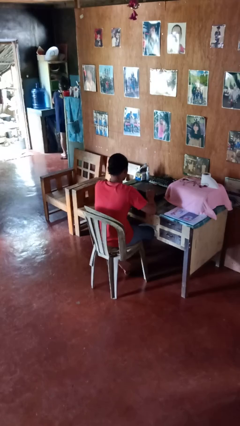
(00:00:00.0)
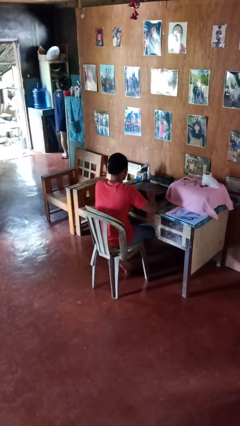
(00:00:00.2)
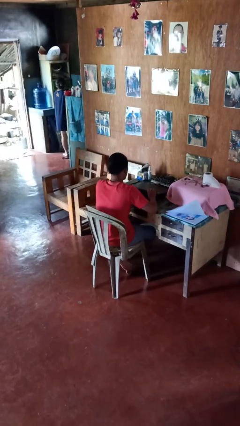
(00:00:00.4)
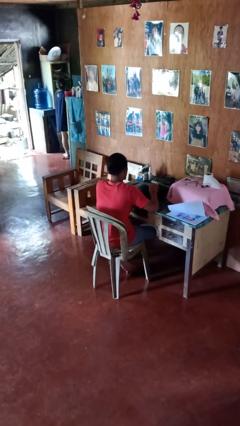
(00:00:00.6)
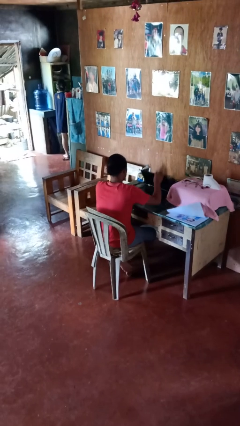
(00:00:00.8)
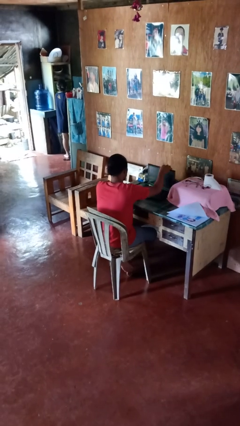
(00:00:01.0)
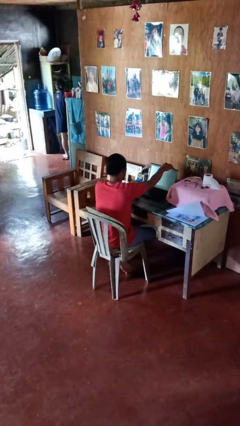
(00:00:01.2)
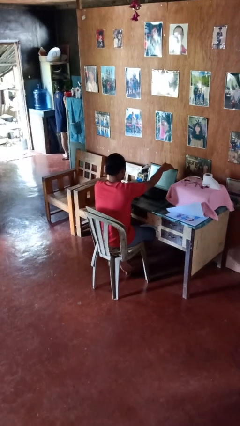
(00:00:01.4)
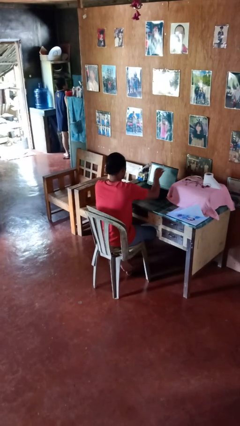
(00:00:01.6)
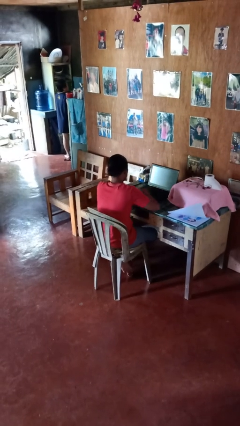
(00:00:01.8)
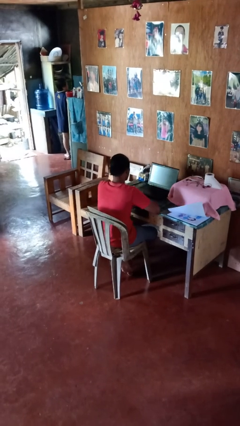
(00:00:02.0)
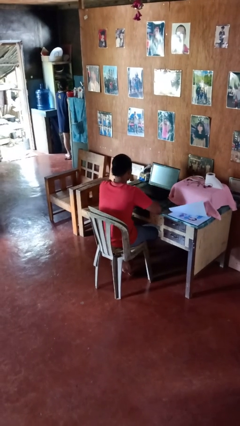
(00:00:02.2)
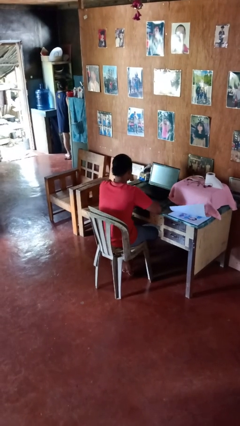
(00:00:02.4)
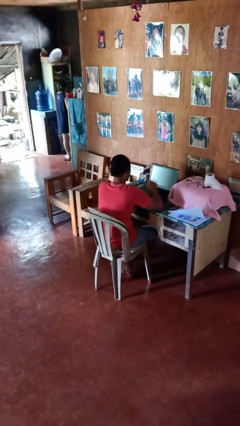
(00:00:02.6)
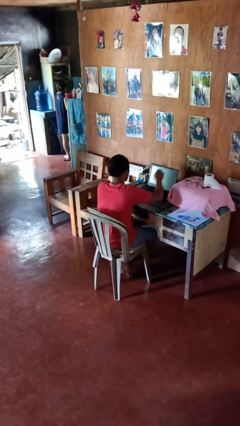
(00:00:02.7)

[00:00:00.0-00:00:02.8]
person opens laptop

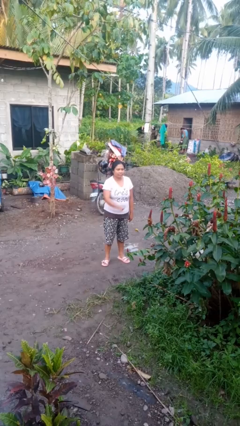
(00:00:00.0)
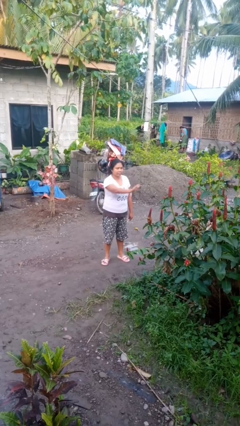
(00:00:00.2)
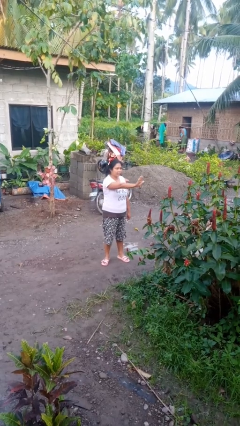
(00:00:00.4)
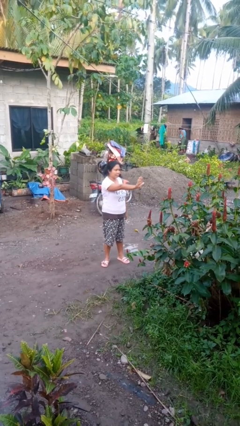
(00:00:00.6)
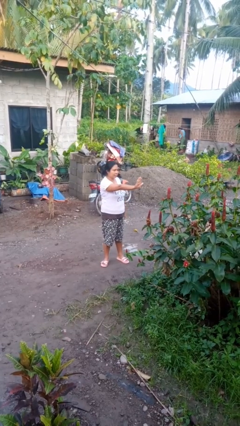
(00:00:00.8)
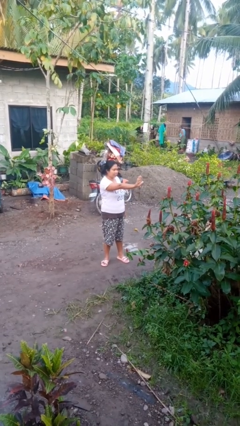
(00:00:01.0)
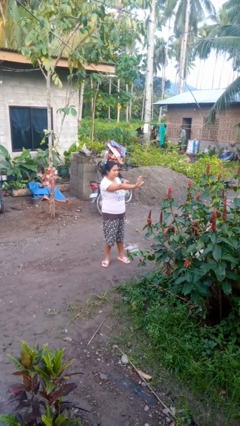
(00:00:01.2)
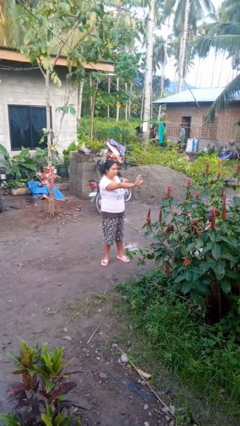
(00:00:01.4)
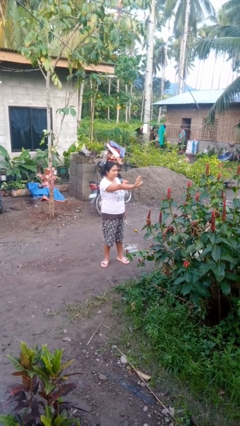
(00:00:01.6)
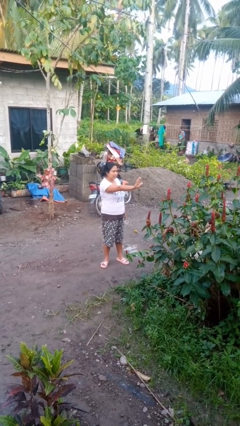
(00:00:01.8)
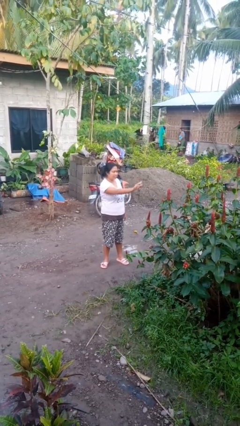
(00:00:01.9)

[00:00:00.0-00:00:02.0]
person gestures stop

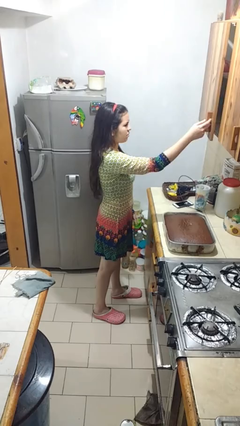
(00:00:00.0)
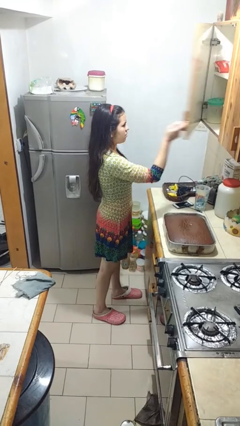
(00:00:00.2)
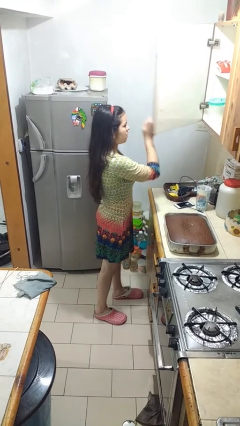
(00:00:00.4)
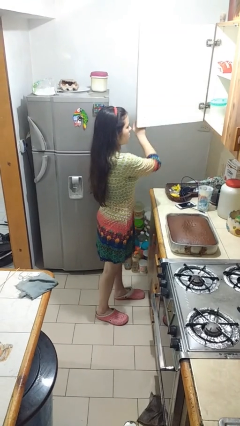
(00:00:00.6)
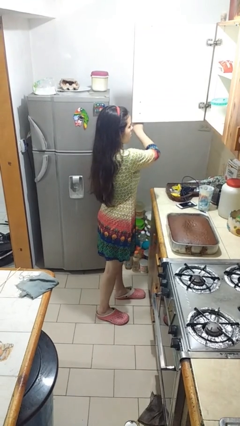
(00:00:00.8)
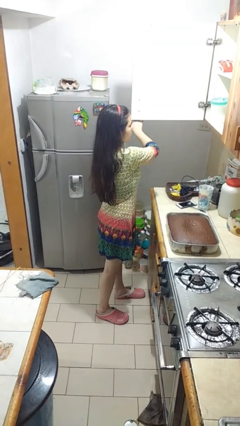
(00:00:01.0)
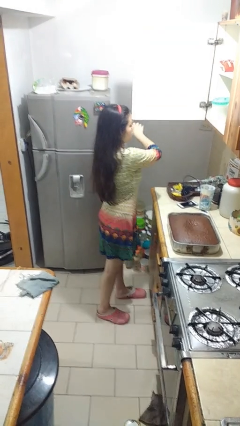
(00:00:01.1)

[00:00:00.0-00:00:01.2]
person opens cabinet

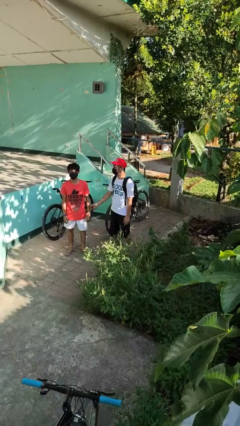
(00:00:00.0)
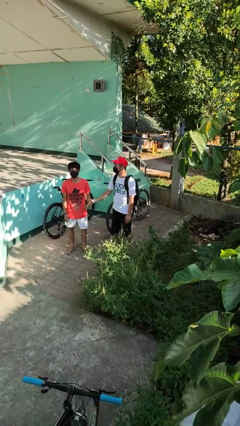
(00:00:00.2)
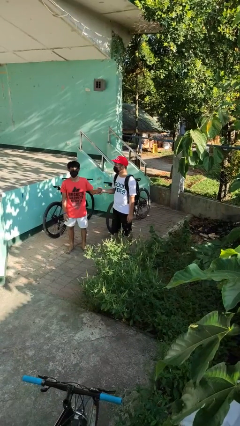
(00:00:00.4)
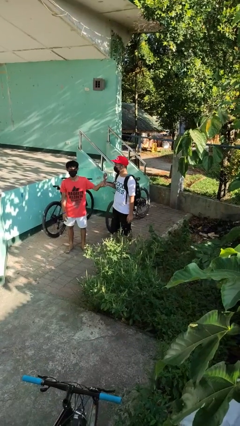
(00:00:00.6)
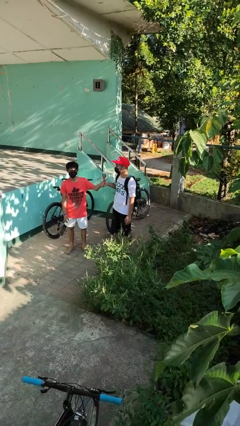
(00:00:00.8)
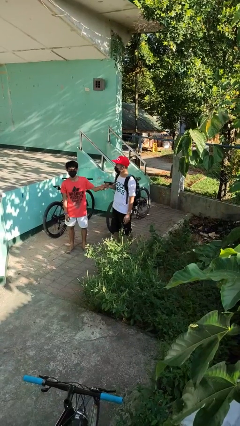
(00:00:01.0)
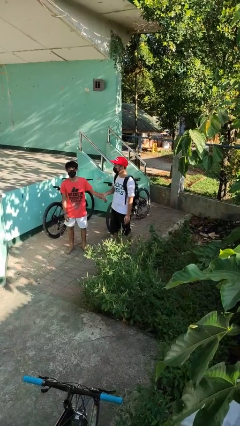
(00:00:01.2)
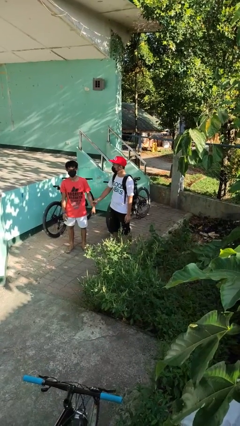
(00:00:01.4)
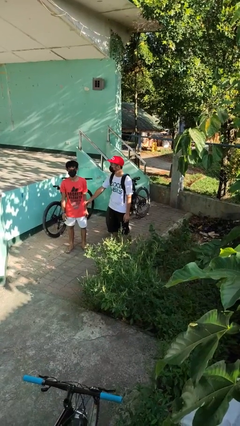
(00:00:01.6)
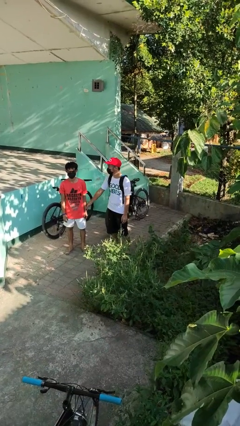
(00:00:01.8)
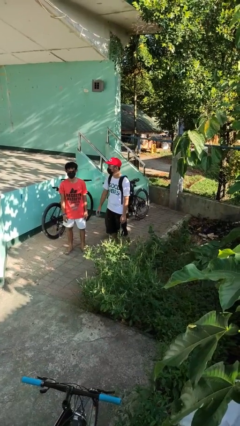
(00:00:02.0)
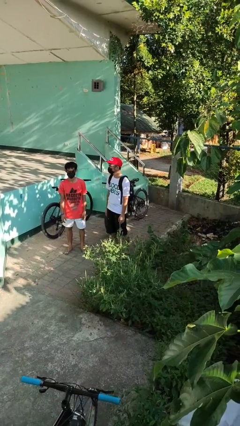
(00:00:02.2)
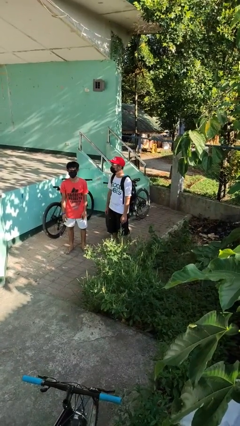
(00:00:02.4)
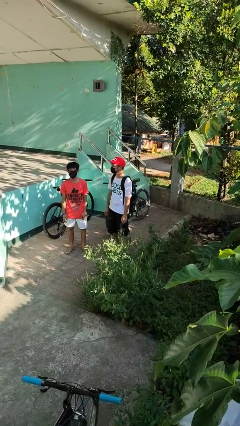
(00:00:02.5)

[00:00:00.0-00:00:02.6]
person grabs person by forearm

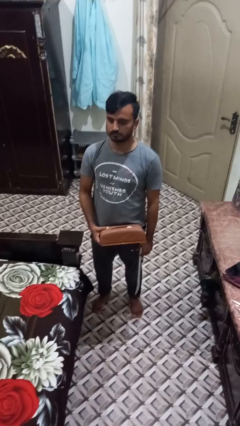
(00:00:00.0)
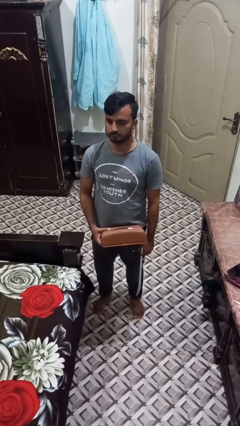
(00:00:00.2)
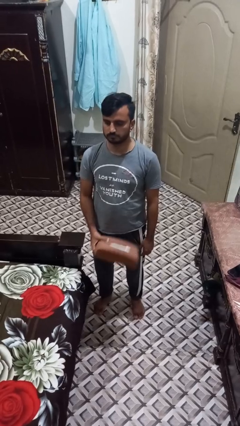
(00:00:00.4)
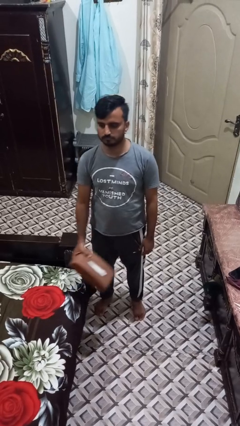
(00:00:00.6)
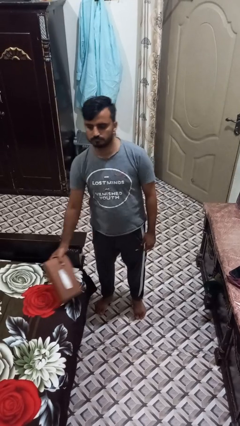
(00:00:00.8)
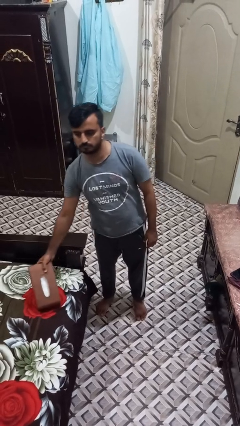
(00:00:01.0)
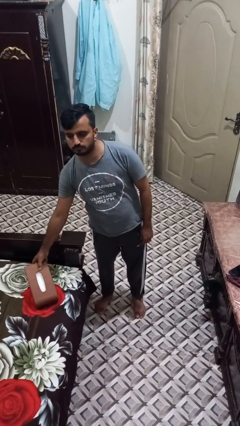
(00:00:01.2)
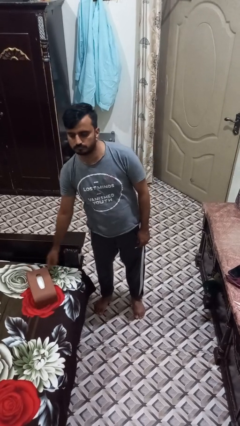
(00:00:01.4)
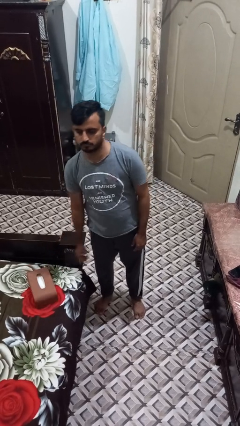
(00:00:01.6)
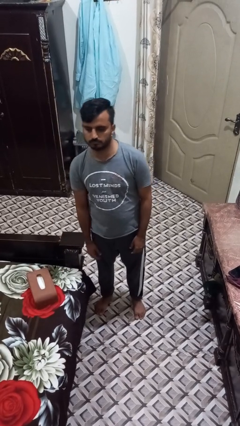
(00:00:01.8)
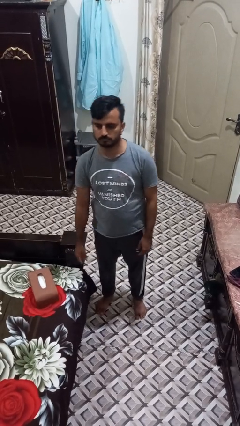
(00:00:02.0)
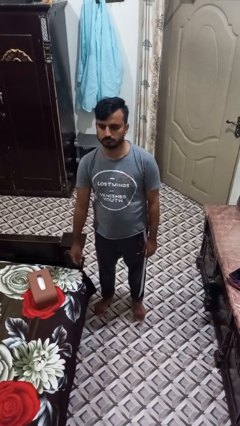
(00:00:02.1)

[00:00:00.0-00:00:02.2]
person puts down object on bed

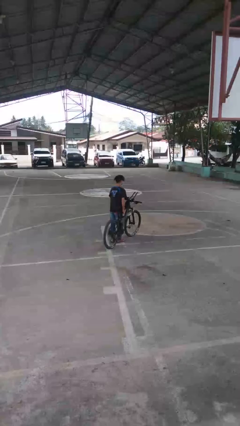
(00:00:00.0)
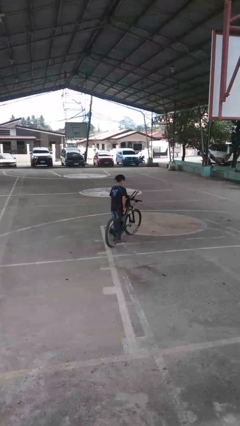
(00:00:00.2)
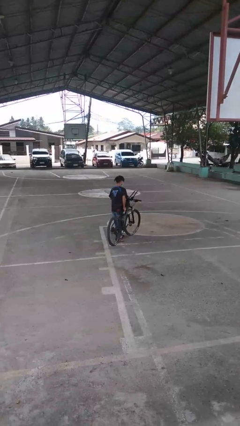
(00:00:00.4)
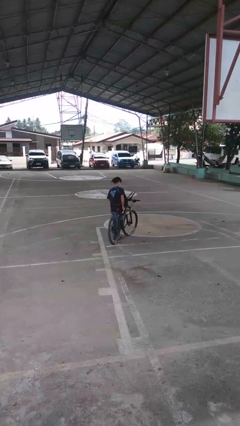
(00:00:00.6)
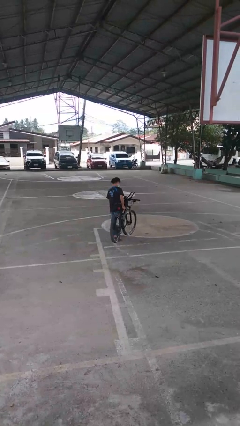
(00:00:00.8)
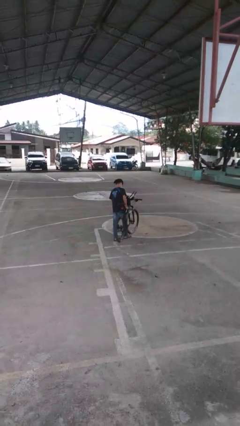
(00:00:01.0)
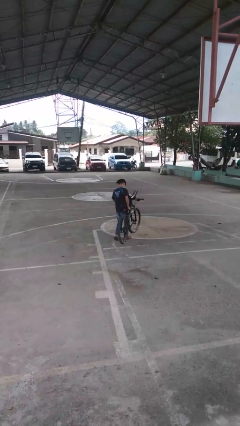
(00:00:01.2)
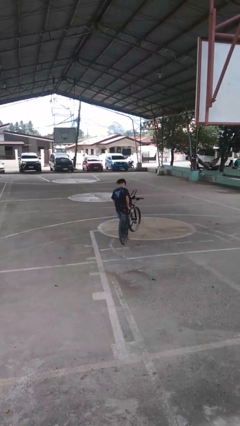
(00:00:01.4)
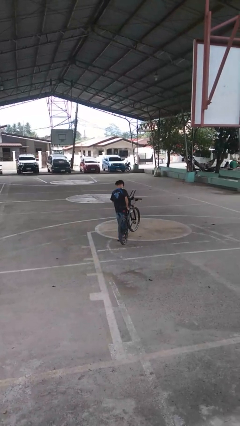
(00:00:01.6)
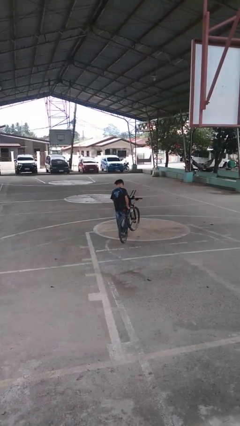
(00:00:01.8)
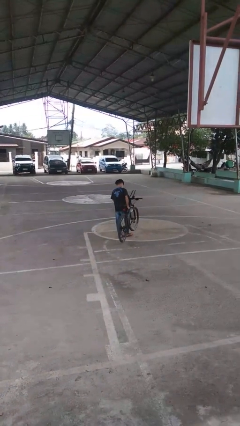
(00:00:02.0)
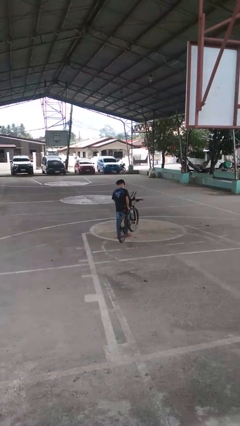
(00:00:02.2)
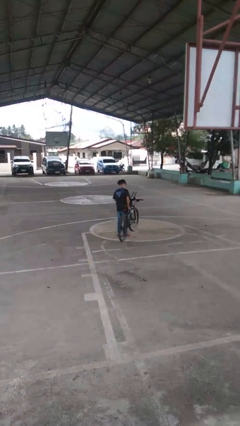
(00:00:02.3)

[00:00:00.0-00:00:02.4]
person carries bicycle

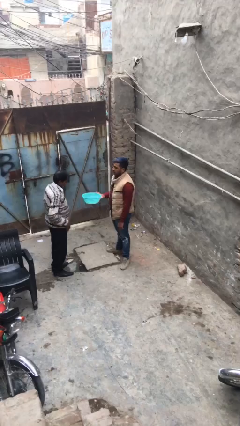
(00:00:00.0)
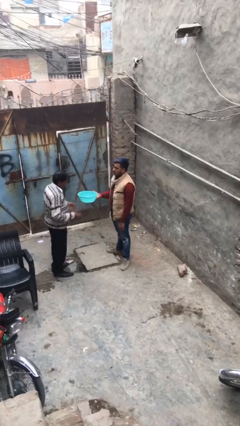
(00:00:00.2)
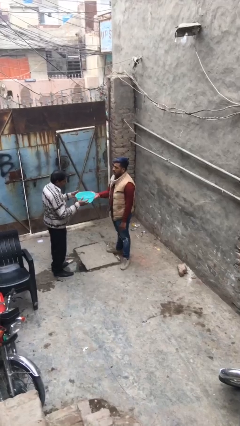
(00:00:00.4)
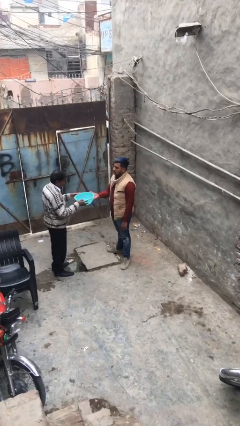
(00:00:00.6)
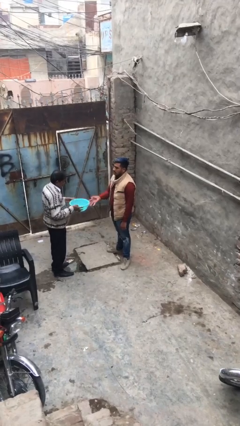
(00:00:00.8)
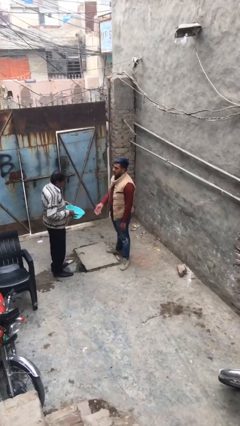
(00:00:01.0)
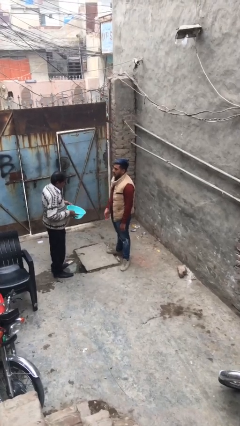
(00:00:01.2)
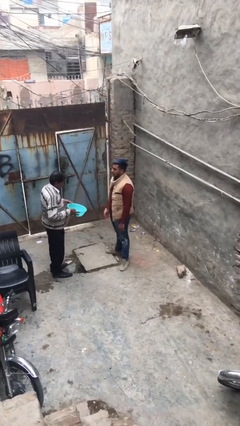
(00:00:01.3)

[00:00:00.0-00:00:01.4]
person transfers object to person

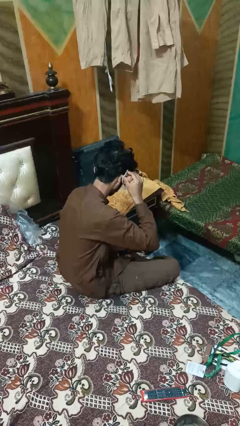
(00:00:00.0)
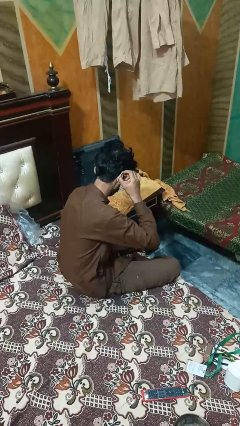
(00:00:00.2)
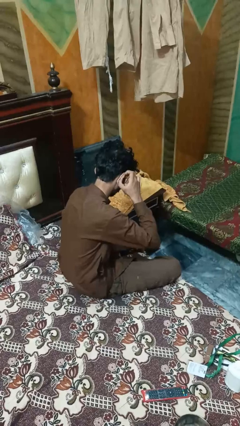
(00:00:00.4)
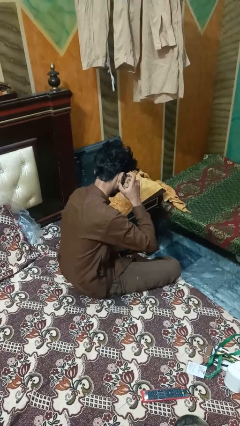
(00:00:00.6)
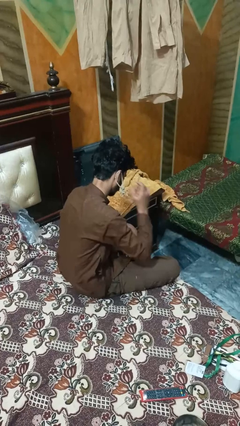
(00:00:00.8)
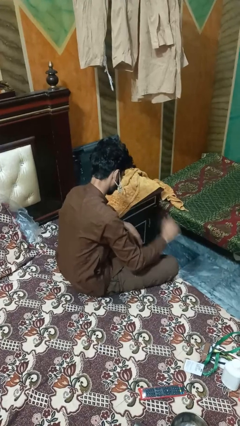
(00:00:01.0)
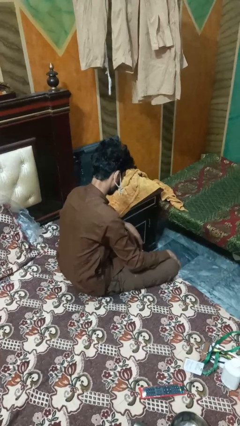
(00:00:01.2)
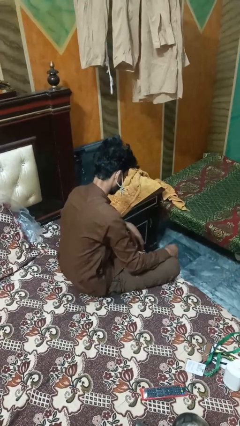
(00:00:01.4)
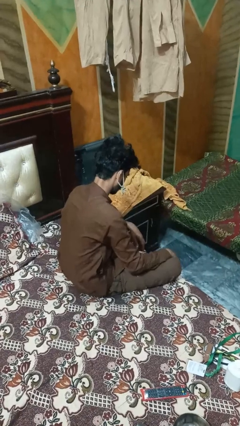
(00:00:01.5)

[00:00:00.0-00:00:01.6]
person puts on earrings

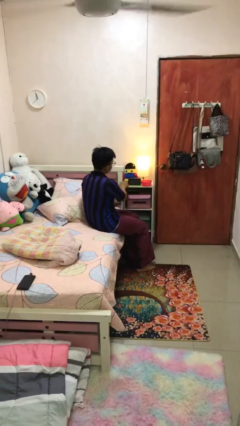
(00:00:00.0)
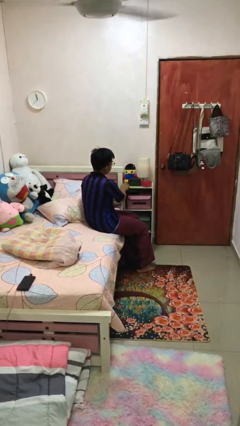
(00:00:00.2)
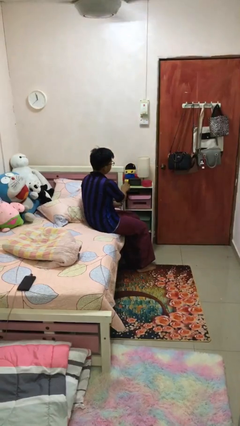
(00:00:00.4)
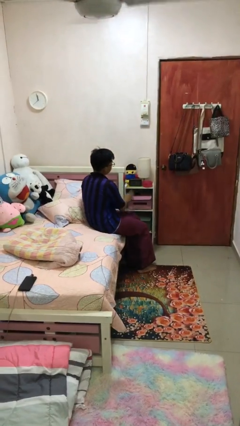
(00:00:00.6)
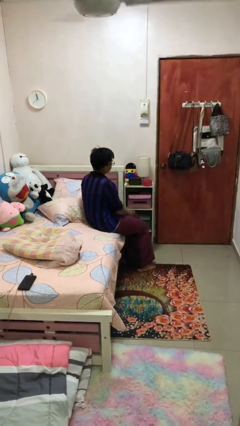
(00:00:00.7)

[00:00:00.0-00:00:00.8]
person turns off lamp
